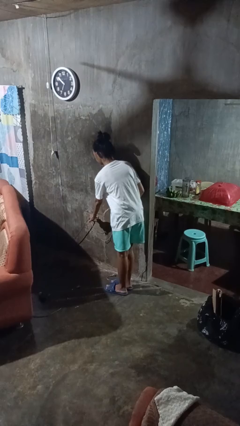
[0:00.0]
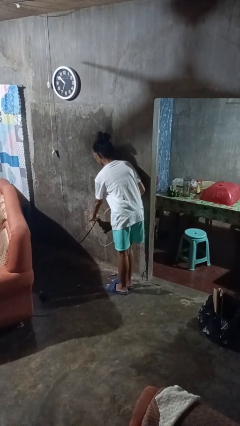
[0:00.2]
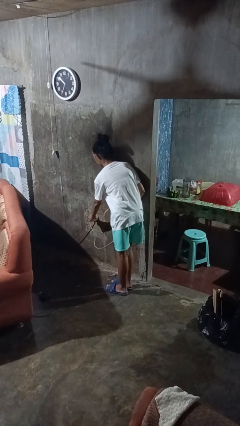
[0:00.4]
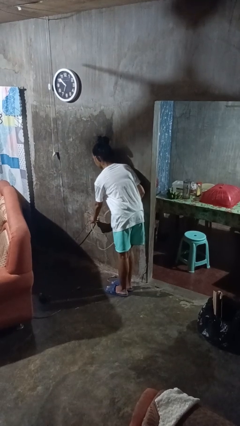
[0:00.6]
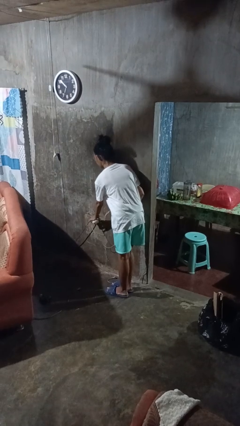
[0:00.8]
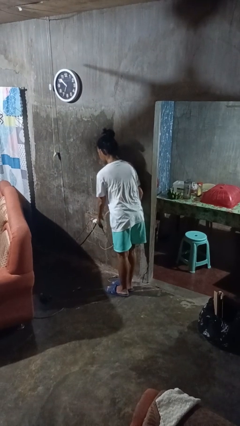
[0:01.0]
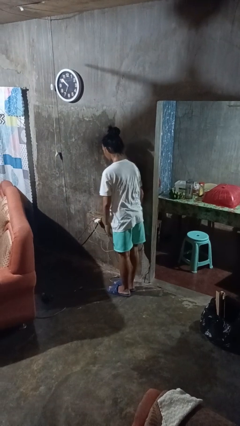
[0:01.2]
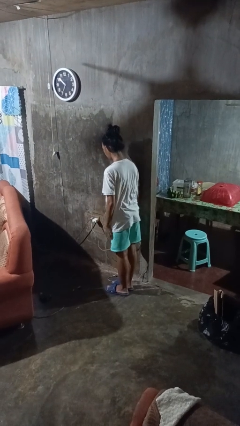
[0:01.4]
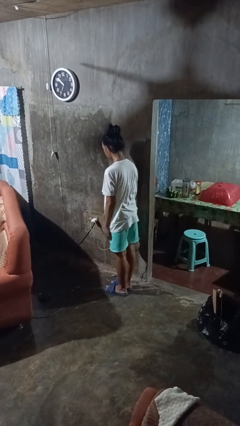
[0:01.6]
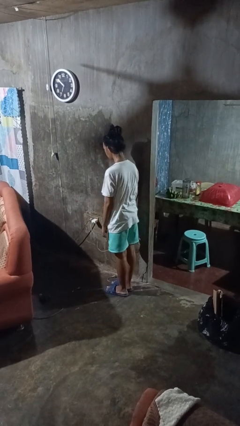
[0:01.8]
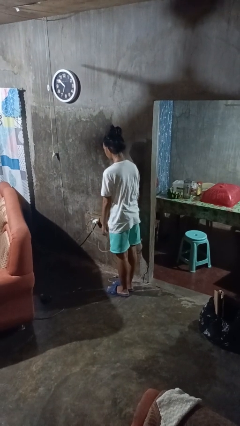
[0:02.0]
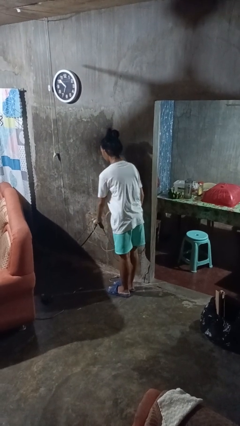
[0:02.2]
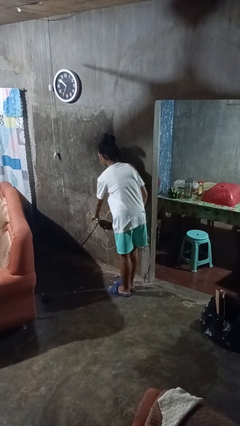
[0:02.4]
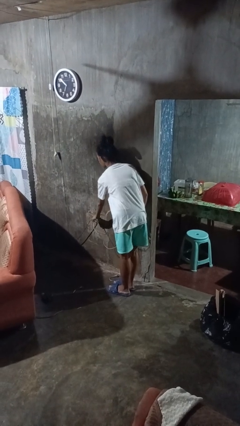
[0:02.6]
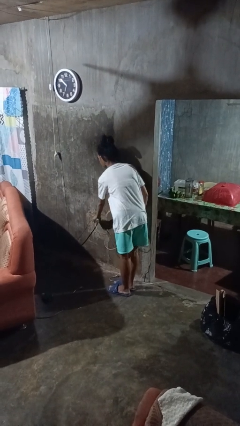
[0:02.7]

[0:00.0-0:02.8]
person plugs into electrical socket

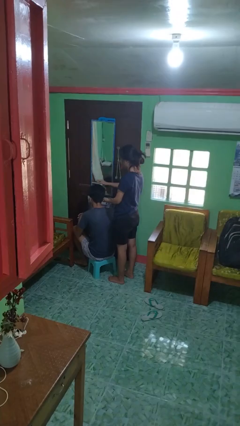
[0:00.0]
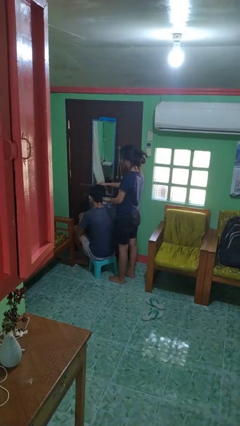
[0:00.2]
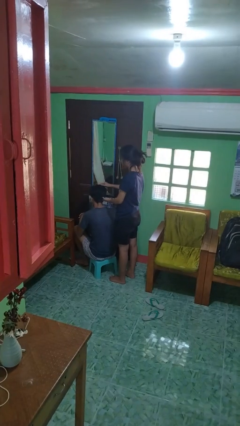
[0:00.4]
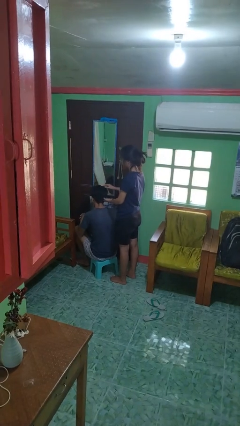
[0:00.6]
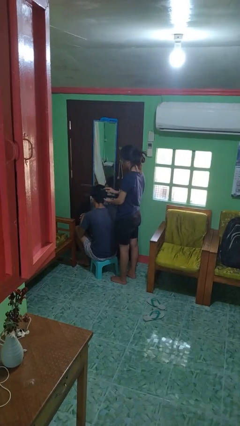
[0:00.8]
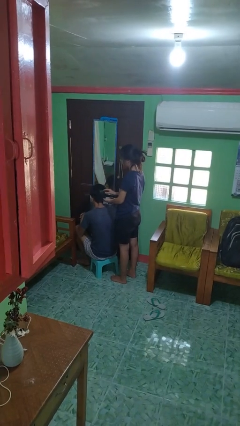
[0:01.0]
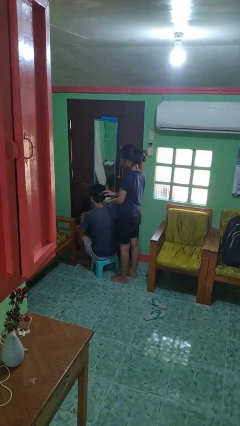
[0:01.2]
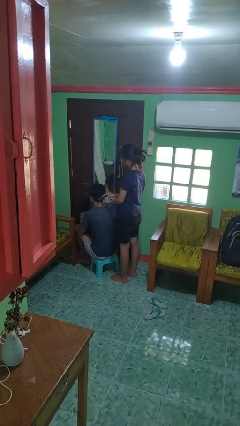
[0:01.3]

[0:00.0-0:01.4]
person brushes hair of person

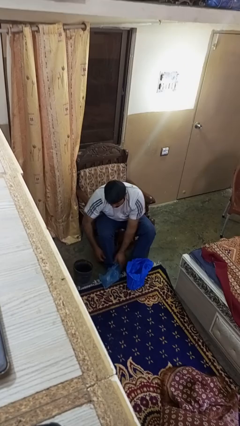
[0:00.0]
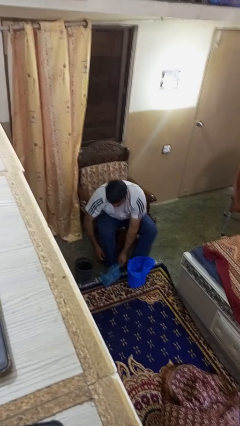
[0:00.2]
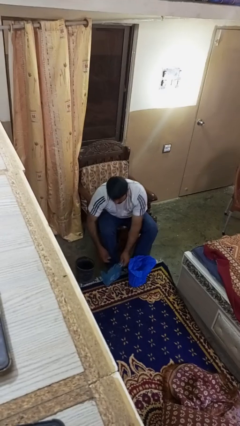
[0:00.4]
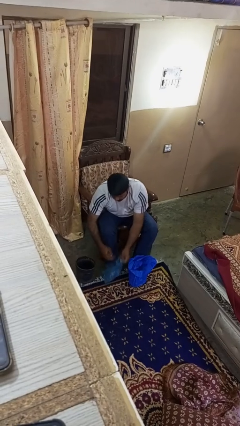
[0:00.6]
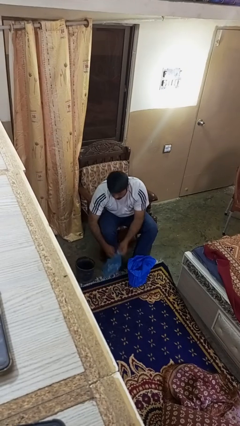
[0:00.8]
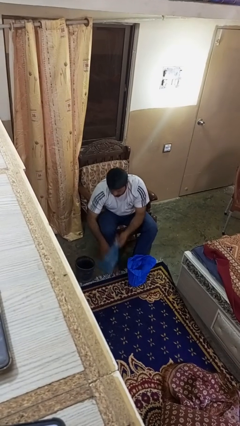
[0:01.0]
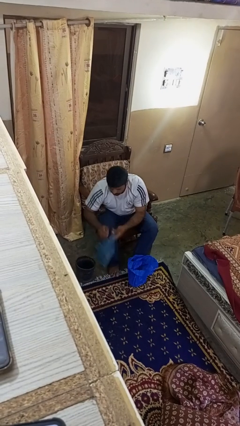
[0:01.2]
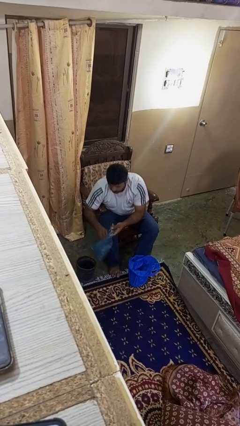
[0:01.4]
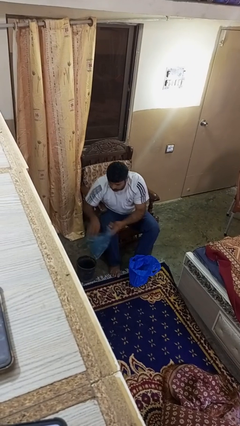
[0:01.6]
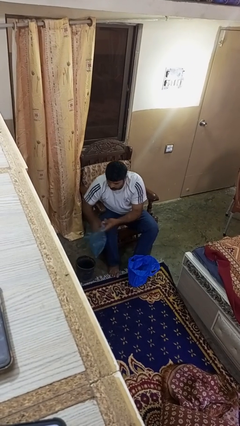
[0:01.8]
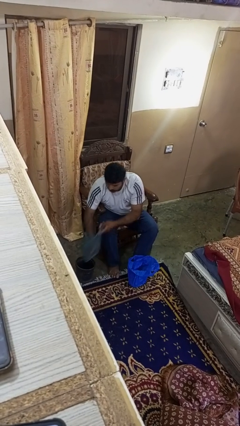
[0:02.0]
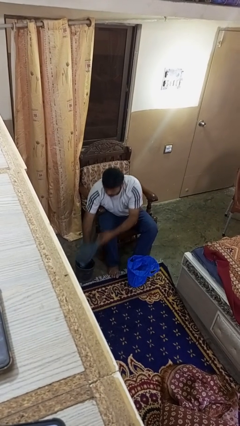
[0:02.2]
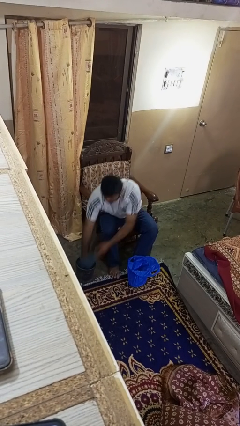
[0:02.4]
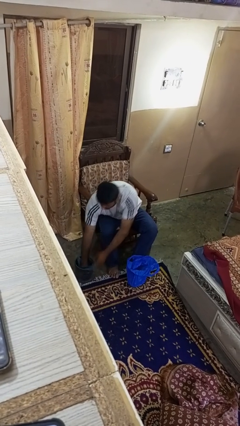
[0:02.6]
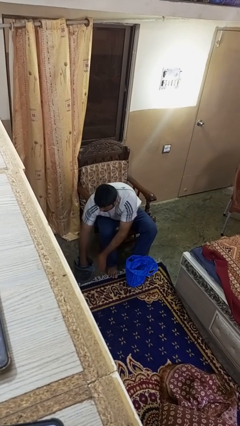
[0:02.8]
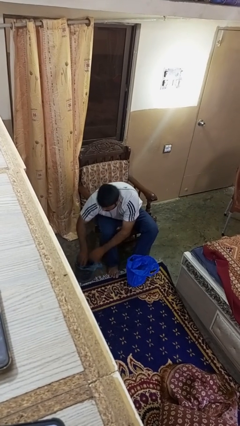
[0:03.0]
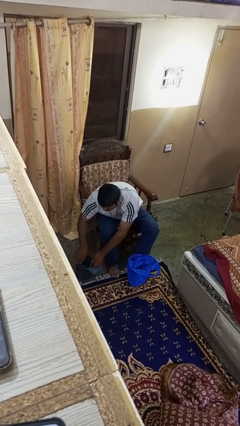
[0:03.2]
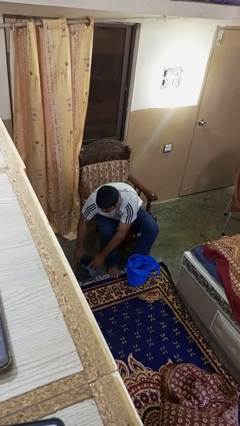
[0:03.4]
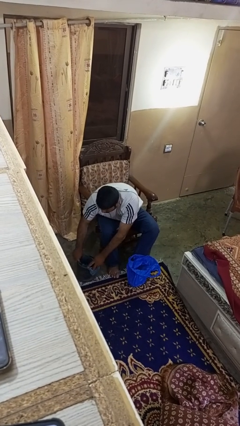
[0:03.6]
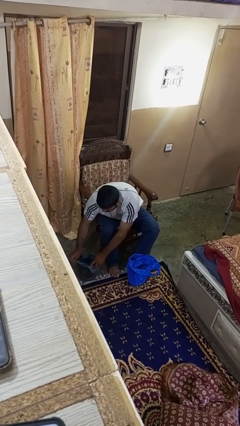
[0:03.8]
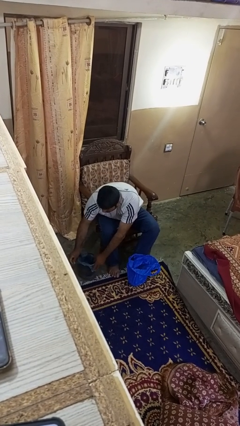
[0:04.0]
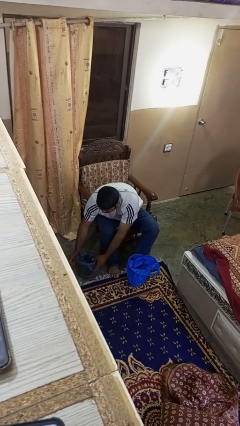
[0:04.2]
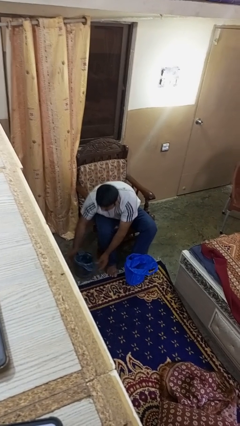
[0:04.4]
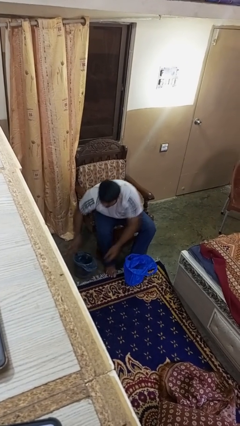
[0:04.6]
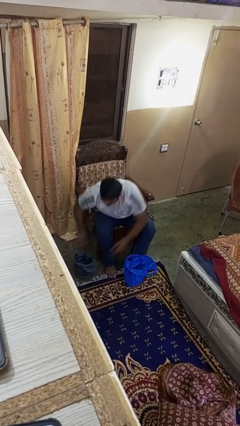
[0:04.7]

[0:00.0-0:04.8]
person inserts trashbag into trashcan

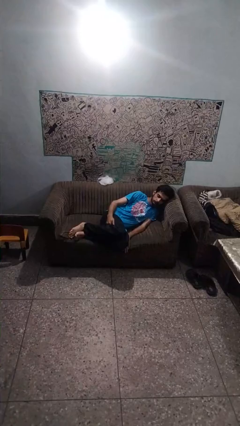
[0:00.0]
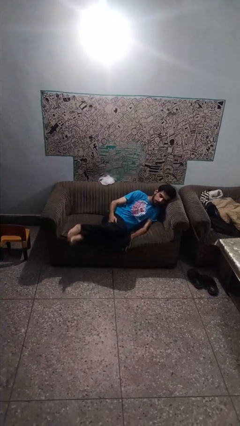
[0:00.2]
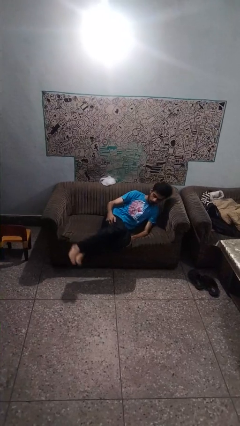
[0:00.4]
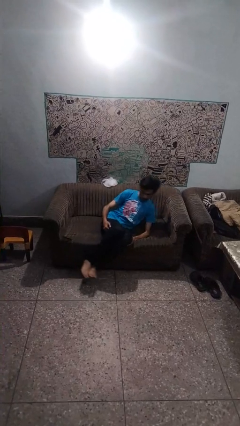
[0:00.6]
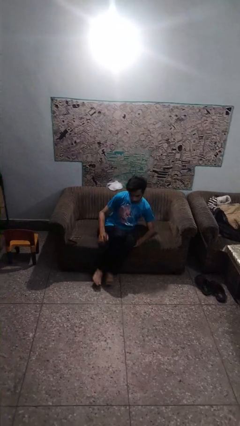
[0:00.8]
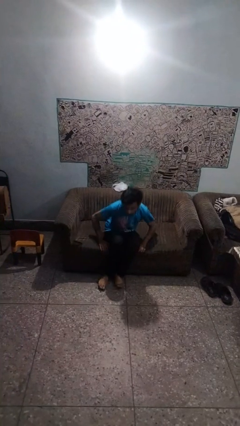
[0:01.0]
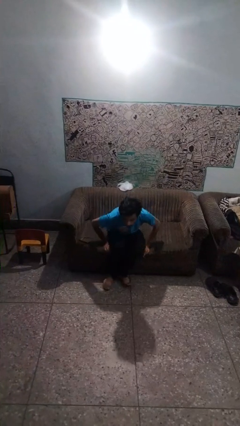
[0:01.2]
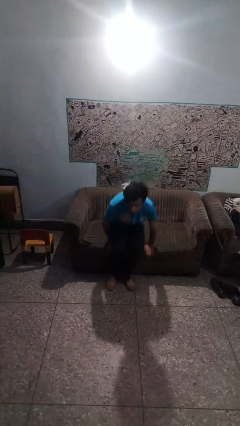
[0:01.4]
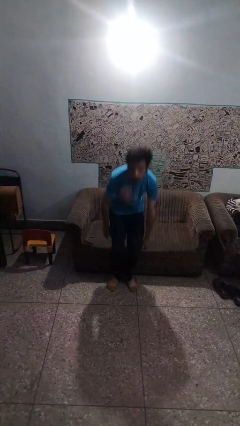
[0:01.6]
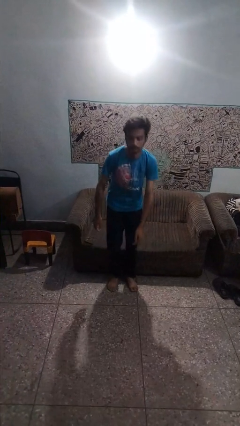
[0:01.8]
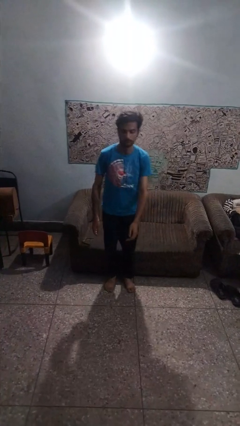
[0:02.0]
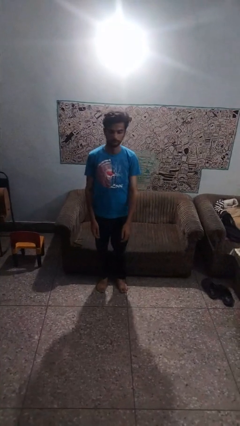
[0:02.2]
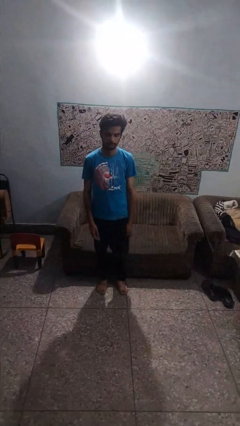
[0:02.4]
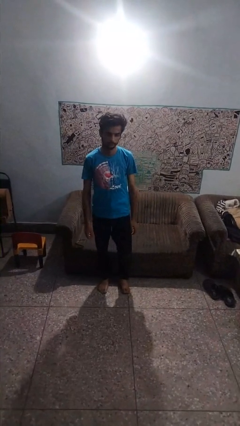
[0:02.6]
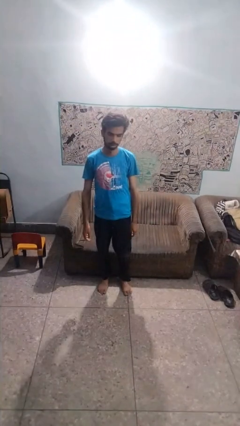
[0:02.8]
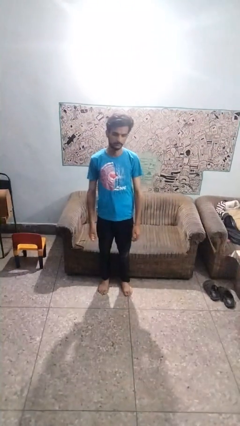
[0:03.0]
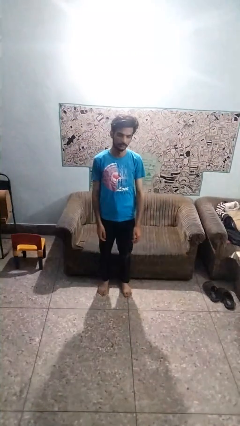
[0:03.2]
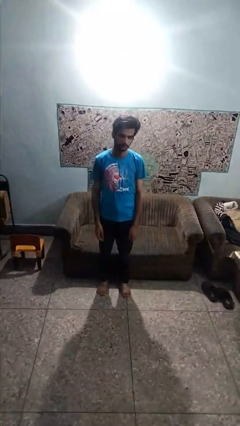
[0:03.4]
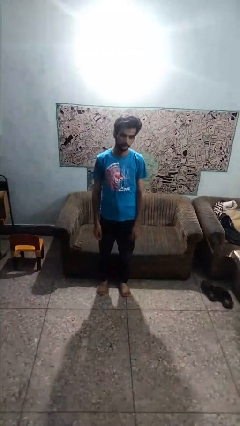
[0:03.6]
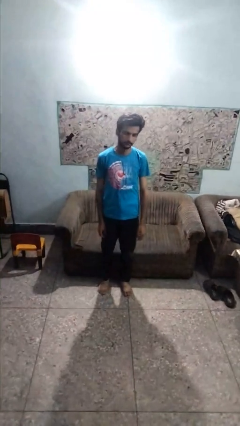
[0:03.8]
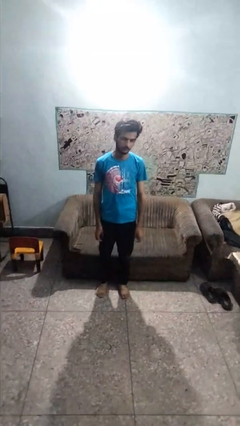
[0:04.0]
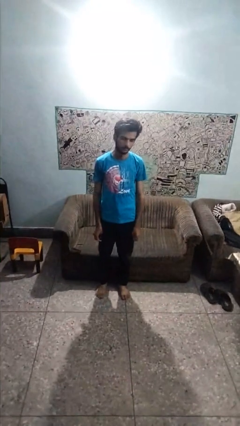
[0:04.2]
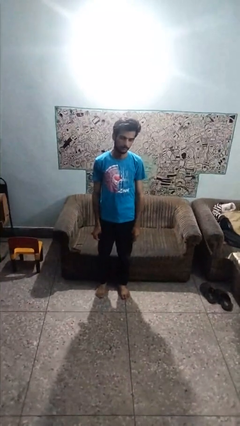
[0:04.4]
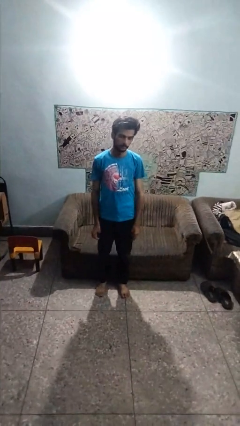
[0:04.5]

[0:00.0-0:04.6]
person stands up

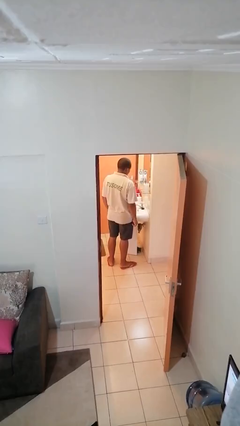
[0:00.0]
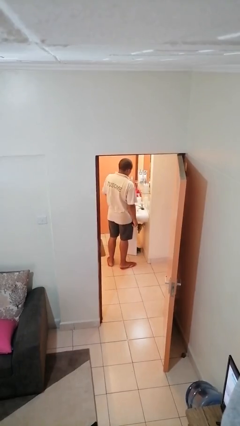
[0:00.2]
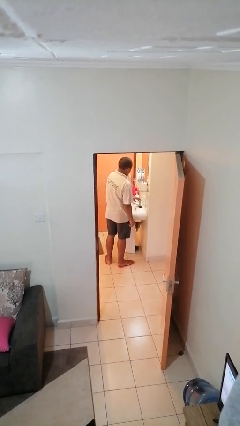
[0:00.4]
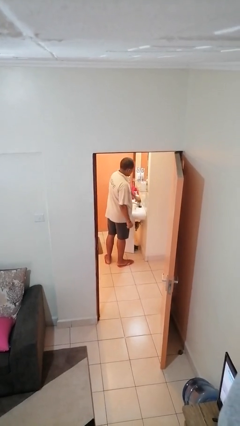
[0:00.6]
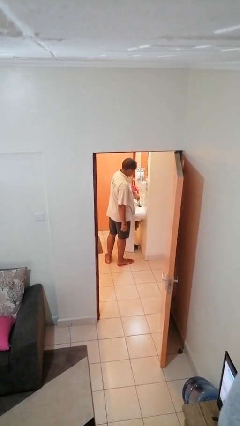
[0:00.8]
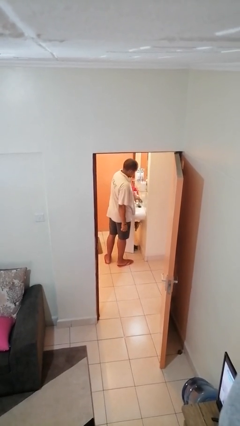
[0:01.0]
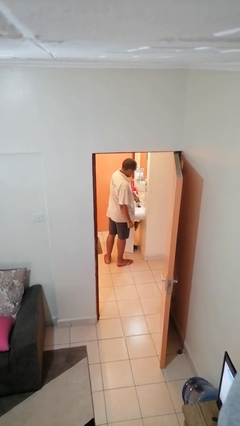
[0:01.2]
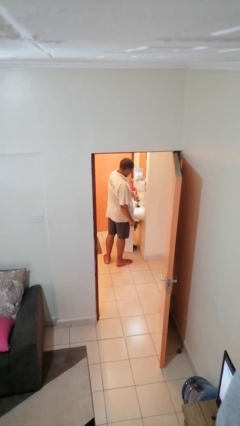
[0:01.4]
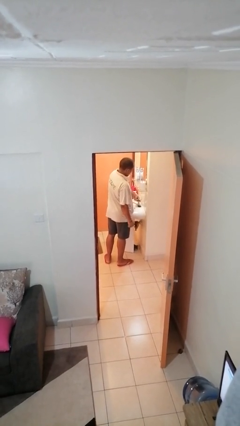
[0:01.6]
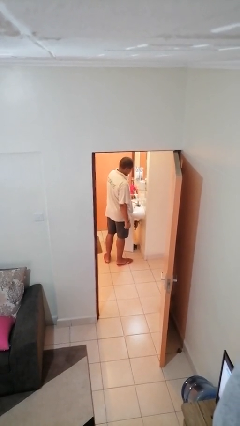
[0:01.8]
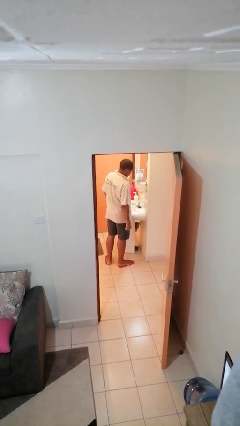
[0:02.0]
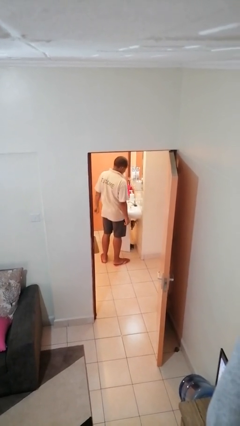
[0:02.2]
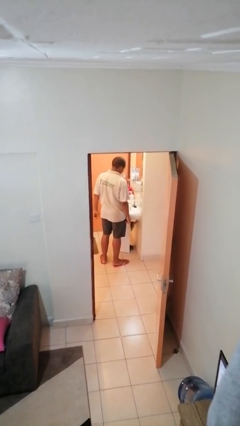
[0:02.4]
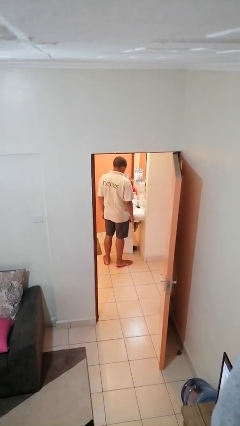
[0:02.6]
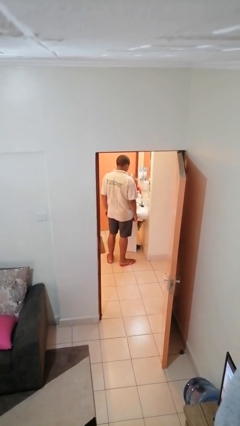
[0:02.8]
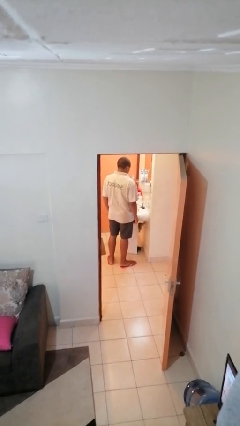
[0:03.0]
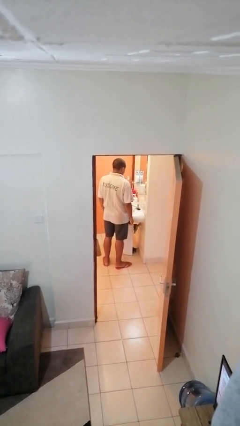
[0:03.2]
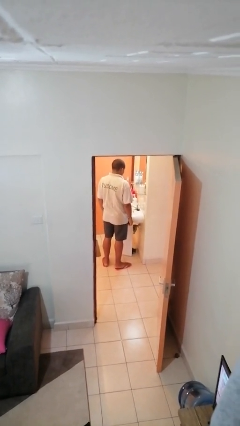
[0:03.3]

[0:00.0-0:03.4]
person turns on faucet

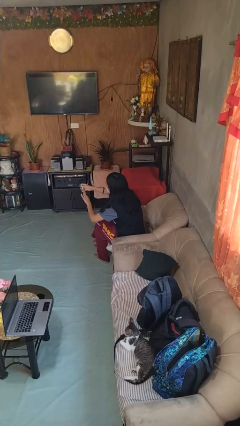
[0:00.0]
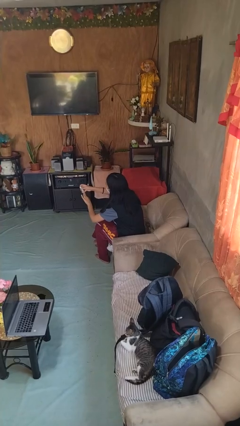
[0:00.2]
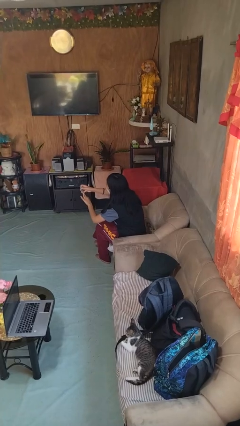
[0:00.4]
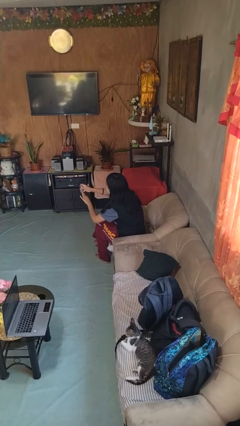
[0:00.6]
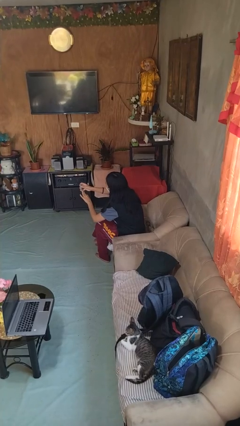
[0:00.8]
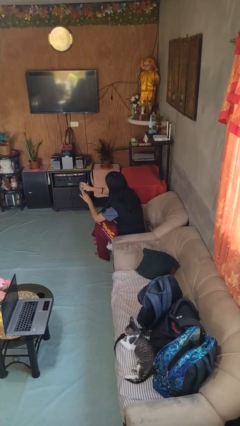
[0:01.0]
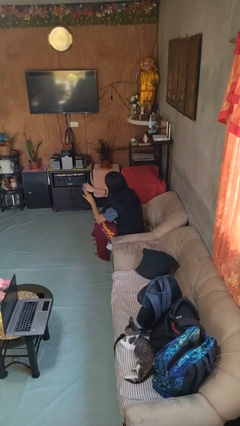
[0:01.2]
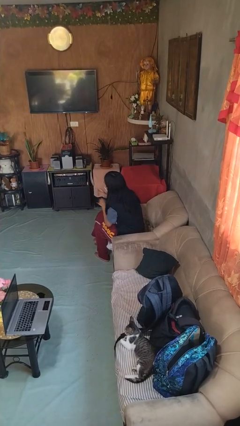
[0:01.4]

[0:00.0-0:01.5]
person clips fingernails
